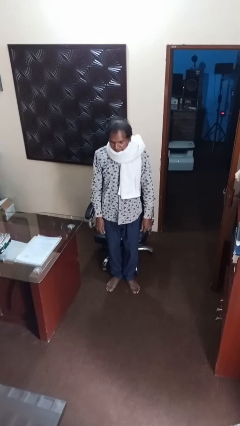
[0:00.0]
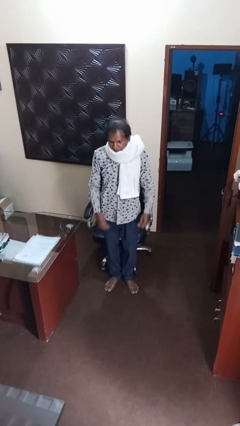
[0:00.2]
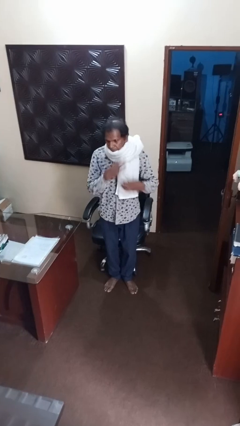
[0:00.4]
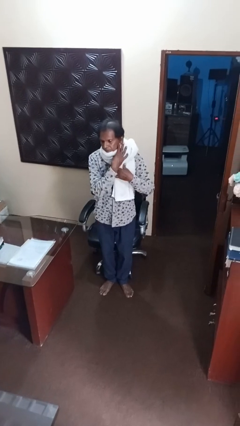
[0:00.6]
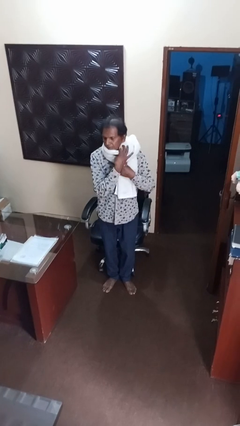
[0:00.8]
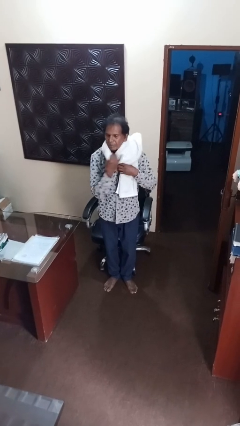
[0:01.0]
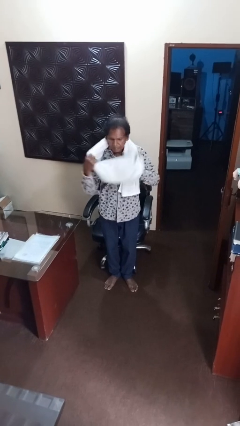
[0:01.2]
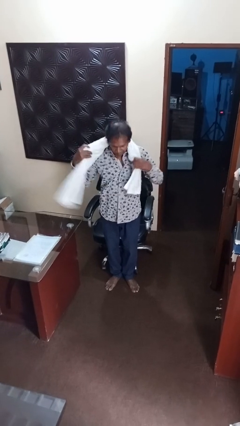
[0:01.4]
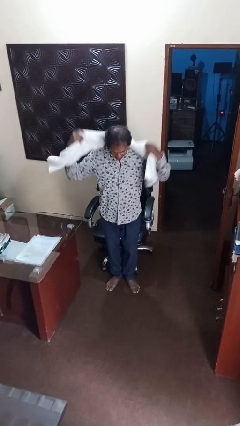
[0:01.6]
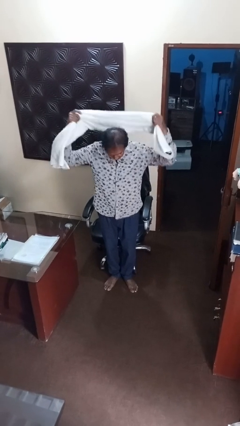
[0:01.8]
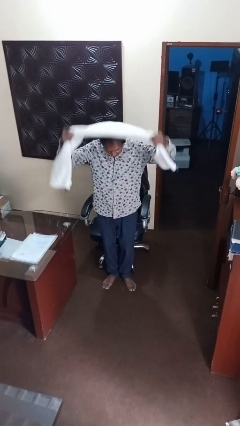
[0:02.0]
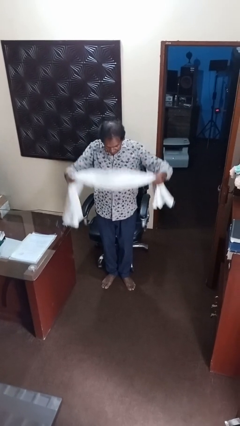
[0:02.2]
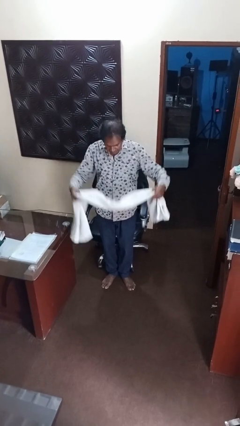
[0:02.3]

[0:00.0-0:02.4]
person takes off scarf

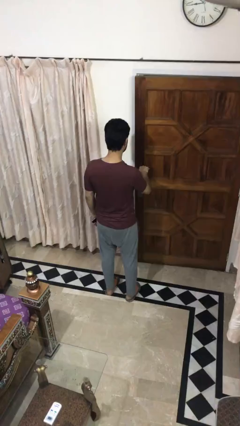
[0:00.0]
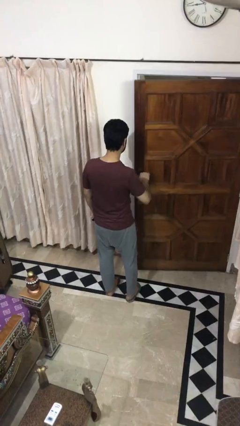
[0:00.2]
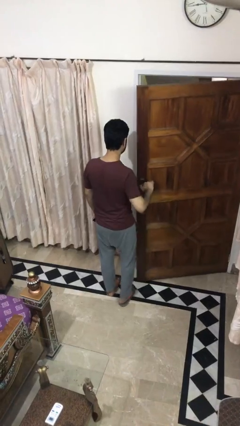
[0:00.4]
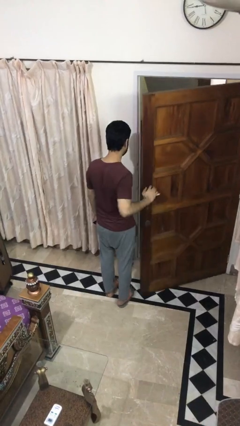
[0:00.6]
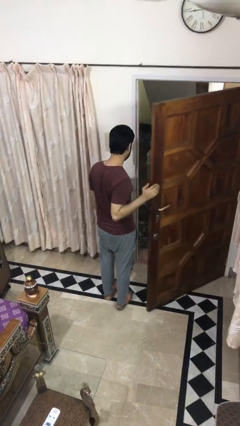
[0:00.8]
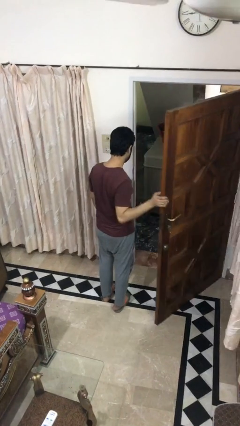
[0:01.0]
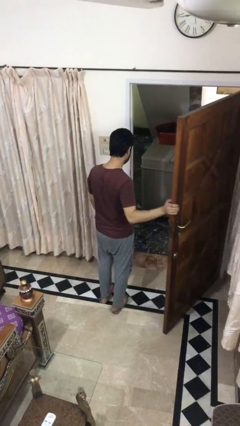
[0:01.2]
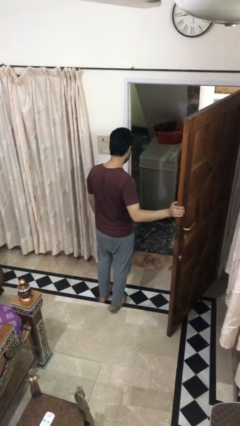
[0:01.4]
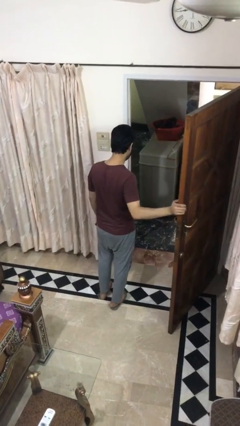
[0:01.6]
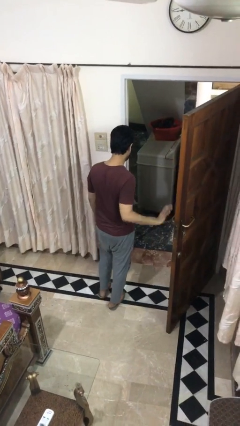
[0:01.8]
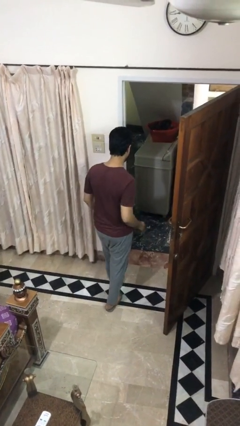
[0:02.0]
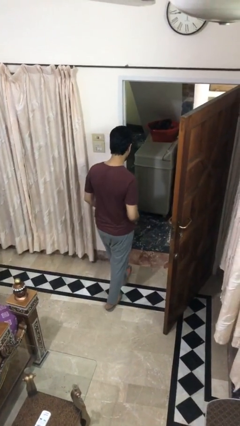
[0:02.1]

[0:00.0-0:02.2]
person opens facility door

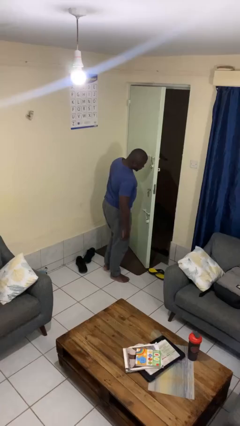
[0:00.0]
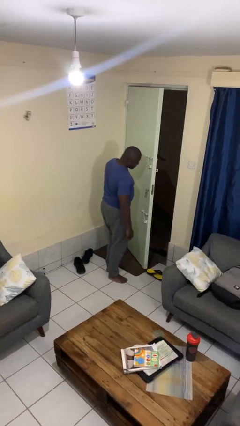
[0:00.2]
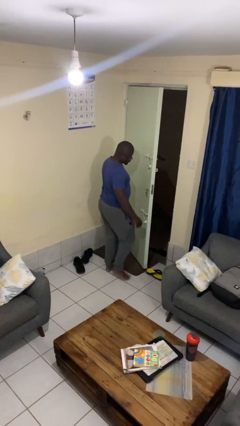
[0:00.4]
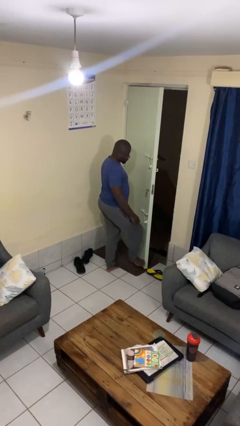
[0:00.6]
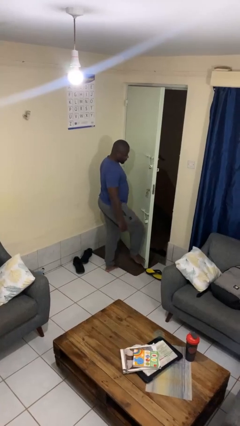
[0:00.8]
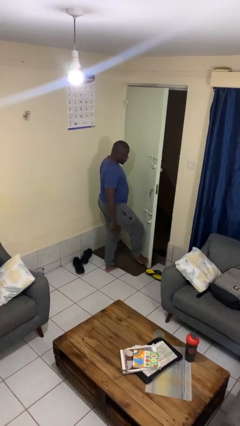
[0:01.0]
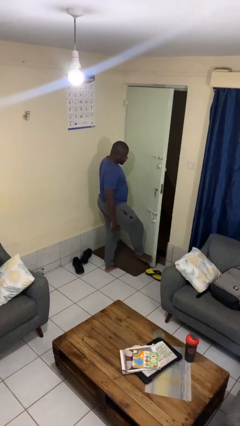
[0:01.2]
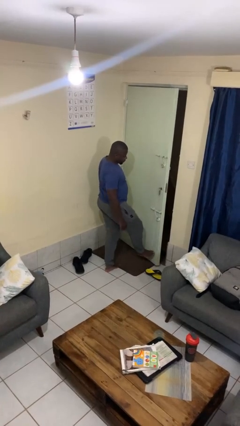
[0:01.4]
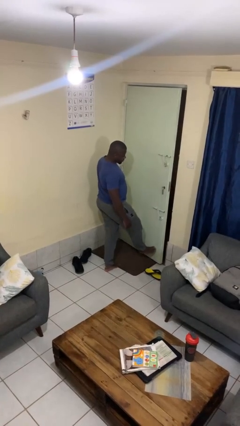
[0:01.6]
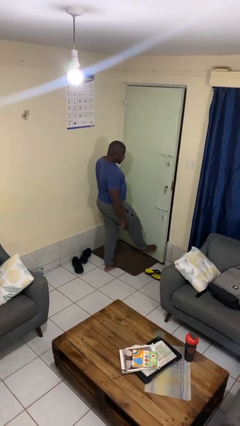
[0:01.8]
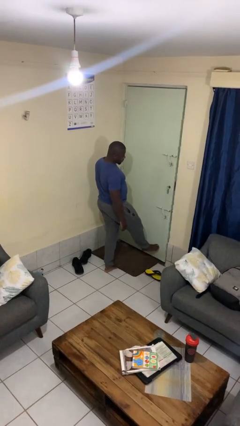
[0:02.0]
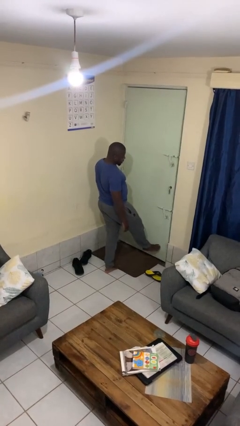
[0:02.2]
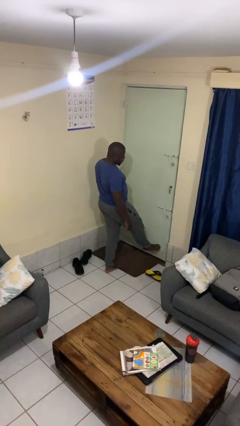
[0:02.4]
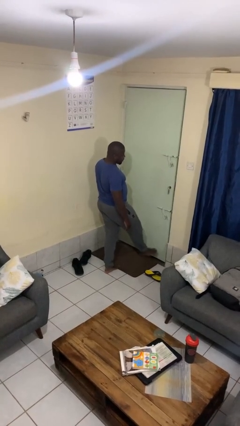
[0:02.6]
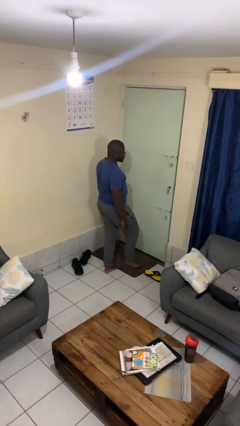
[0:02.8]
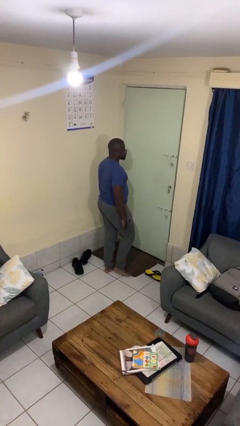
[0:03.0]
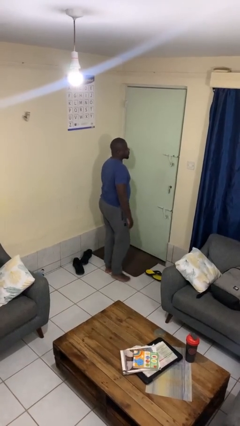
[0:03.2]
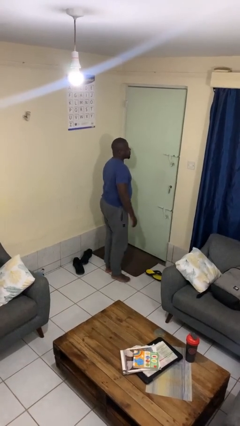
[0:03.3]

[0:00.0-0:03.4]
person closes door with foot

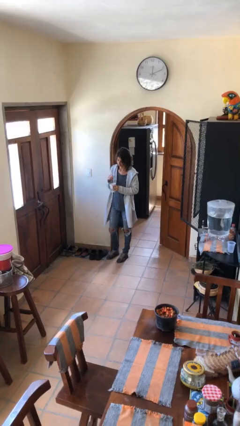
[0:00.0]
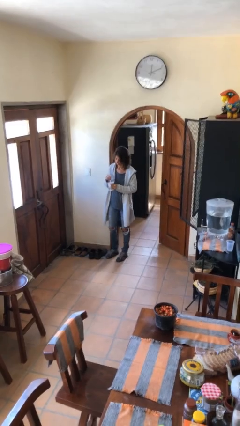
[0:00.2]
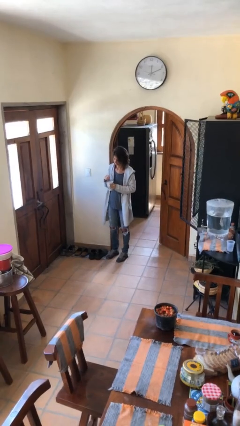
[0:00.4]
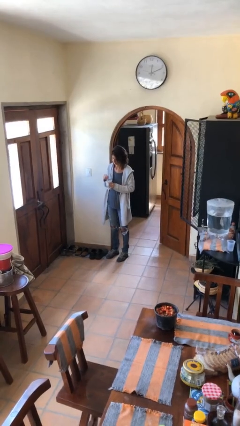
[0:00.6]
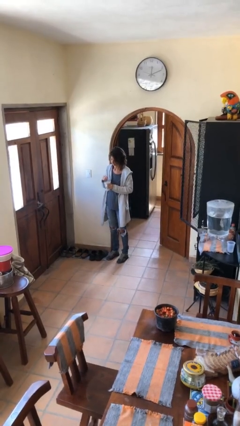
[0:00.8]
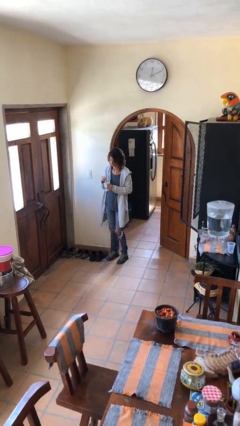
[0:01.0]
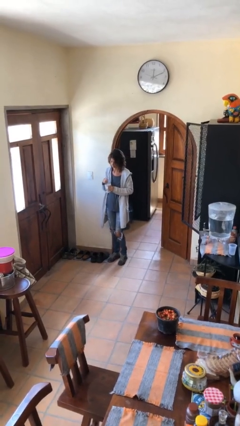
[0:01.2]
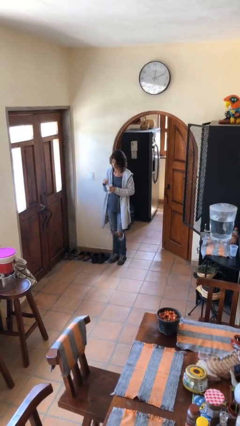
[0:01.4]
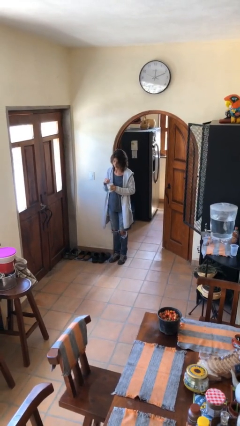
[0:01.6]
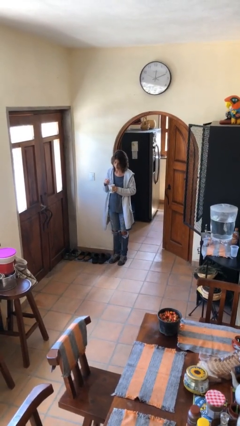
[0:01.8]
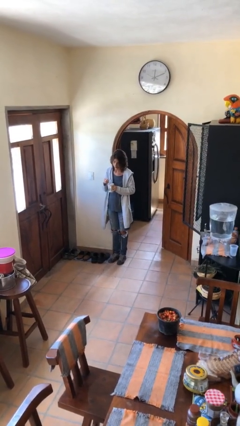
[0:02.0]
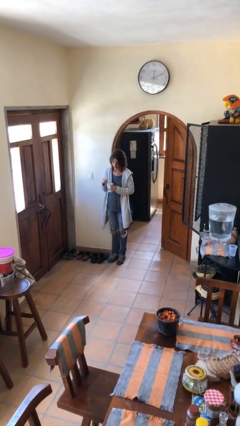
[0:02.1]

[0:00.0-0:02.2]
person stirs mug

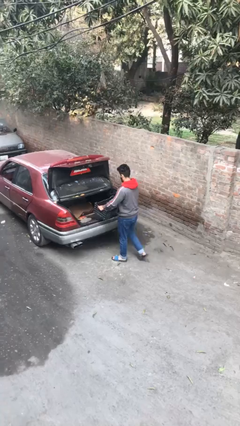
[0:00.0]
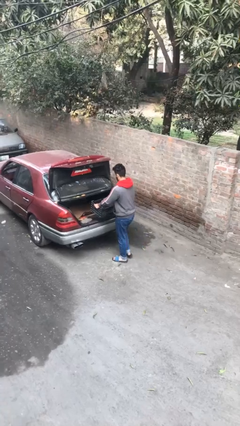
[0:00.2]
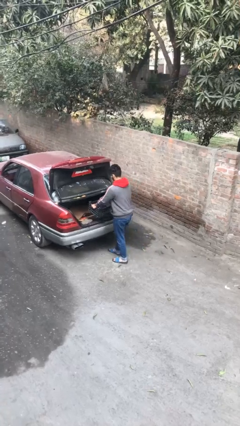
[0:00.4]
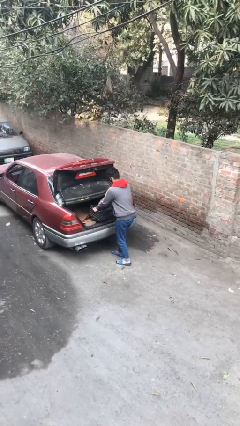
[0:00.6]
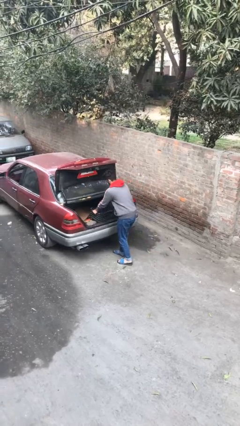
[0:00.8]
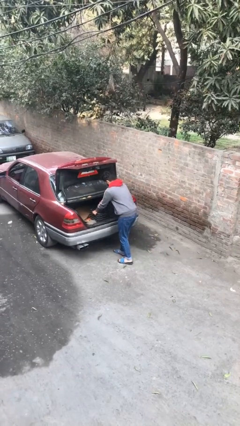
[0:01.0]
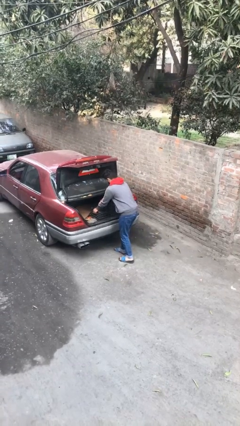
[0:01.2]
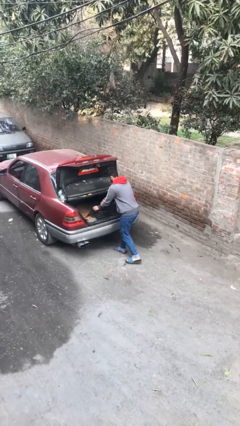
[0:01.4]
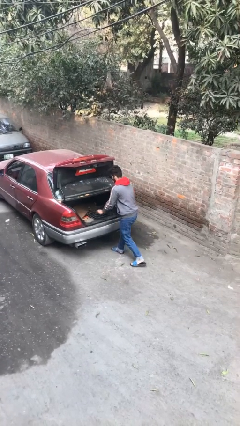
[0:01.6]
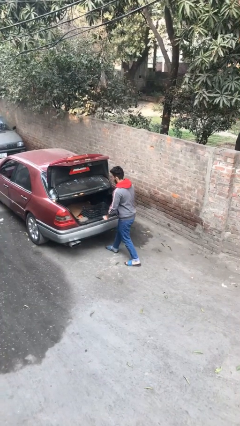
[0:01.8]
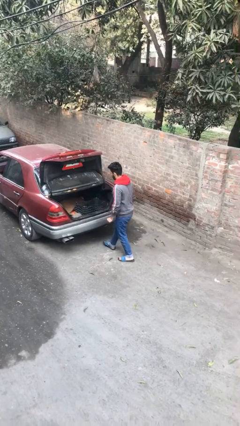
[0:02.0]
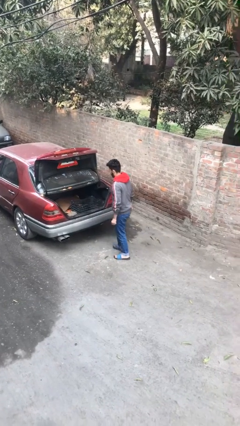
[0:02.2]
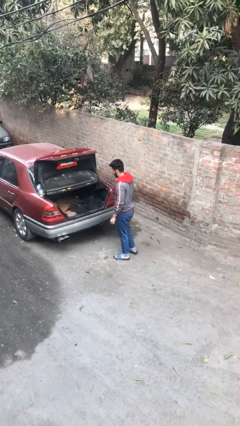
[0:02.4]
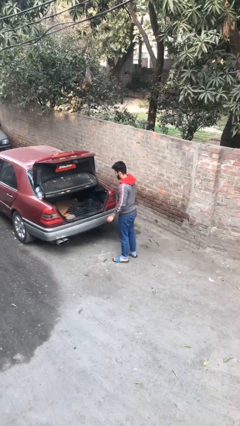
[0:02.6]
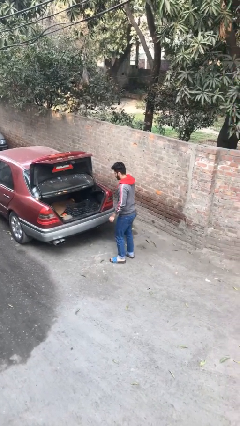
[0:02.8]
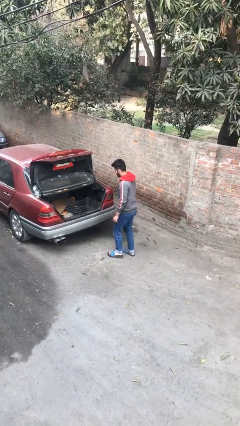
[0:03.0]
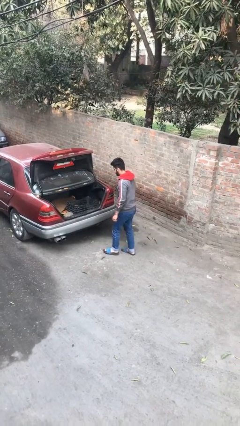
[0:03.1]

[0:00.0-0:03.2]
person loads car

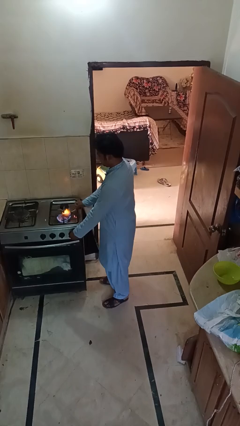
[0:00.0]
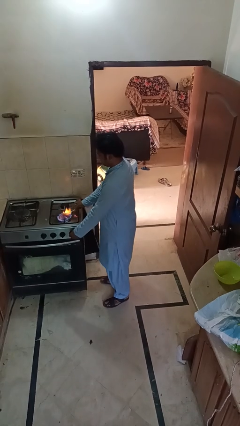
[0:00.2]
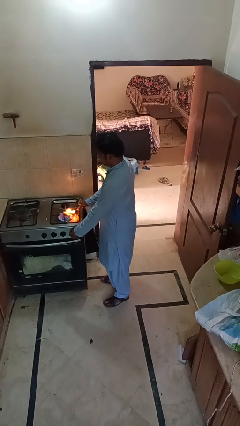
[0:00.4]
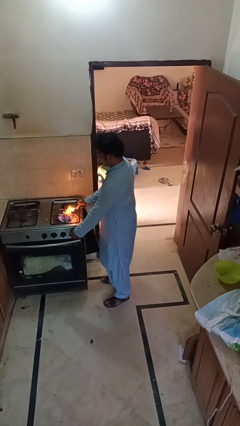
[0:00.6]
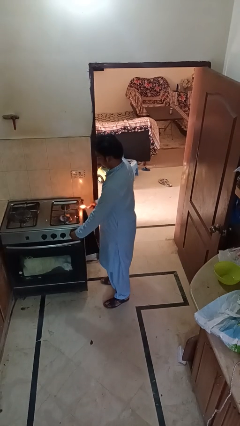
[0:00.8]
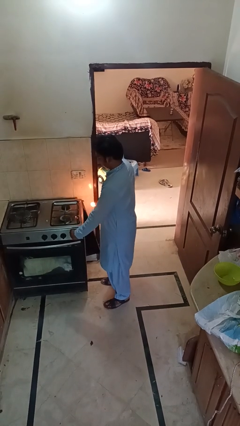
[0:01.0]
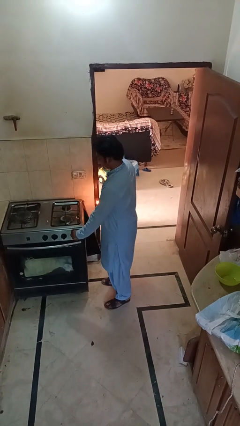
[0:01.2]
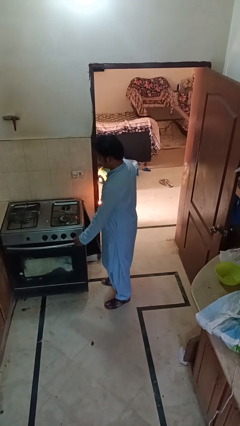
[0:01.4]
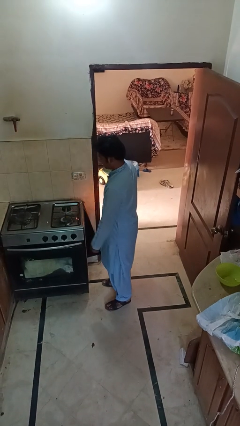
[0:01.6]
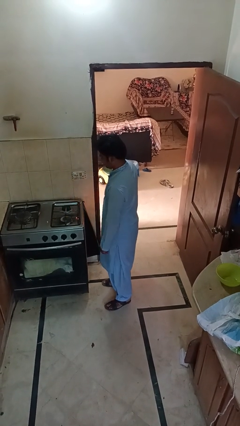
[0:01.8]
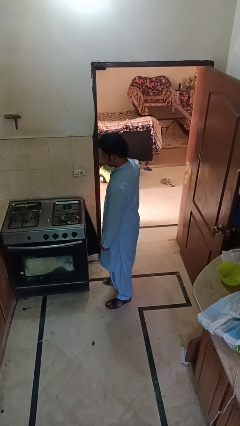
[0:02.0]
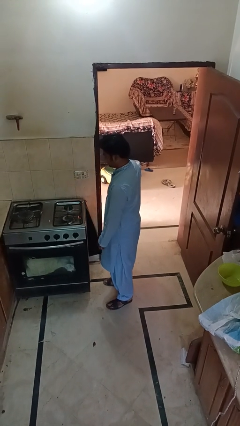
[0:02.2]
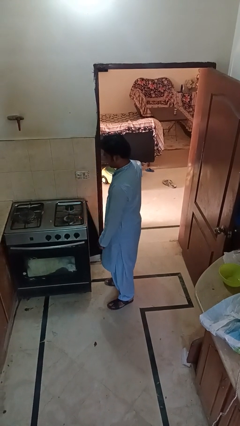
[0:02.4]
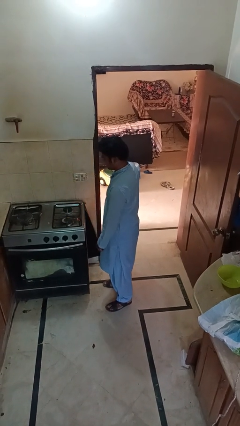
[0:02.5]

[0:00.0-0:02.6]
person turns off stovetop

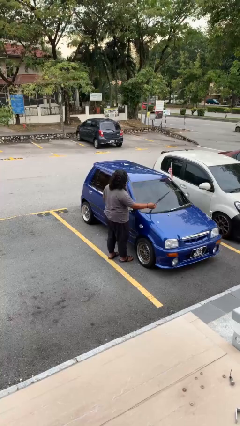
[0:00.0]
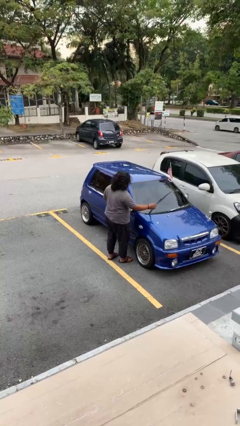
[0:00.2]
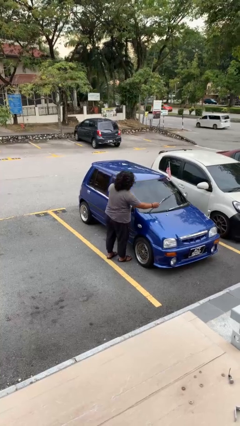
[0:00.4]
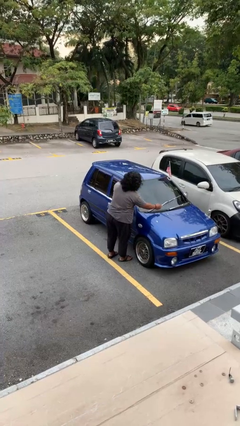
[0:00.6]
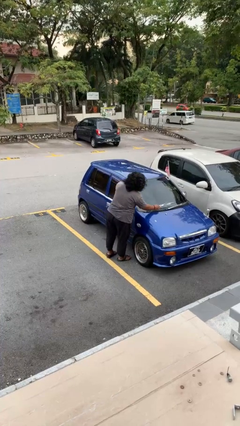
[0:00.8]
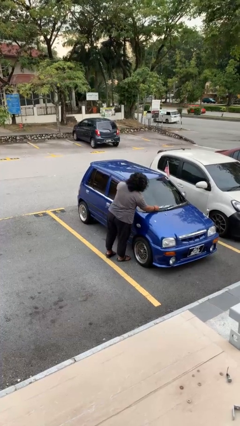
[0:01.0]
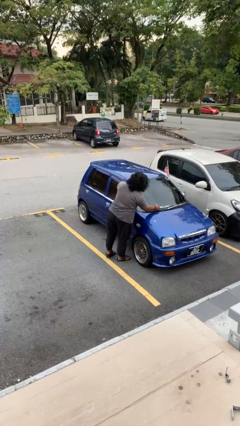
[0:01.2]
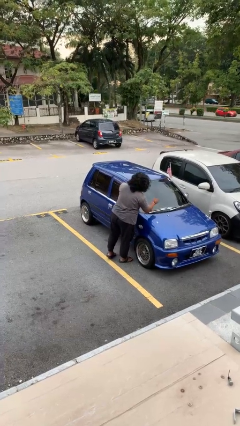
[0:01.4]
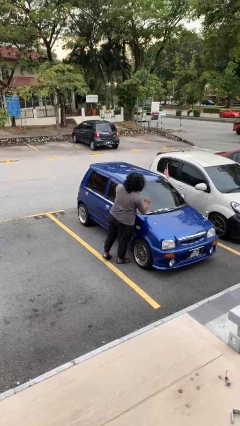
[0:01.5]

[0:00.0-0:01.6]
person flips down car wipers
